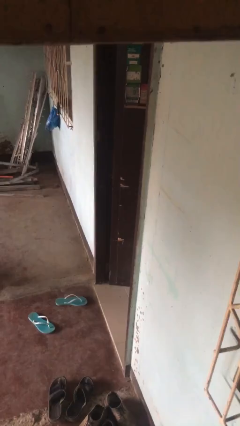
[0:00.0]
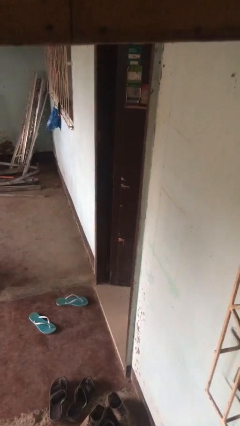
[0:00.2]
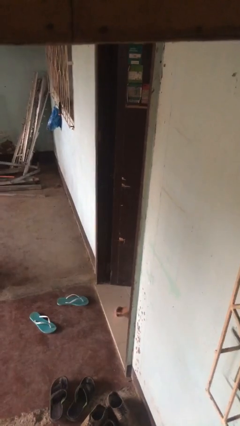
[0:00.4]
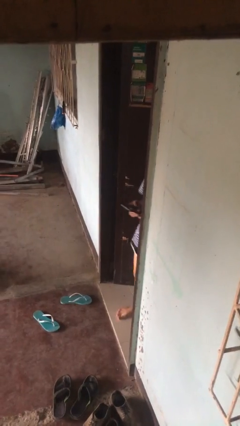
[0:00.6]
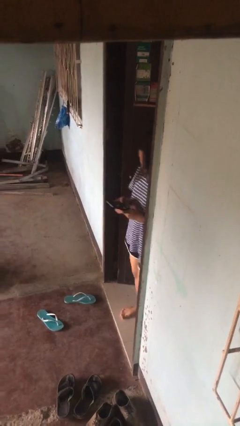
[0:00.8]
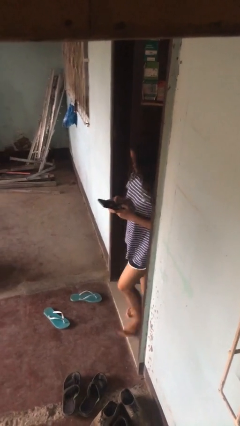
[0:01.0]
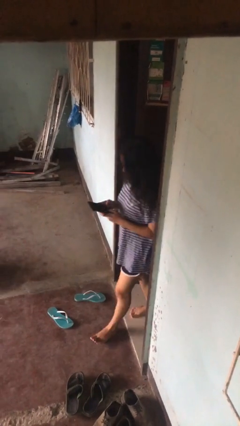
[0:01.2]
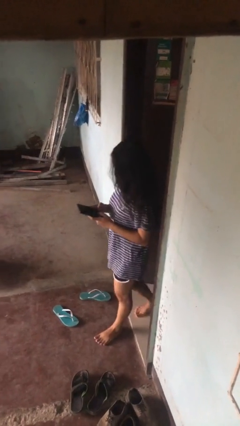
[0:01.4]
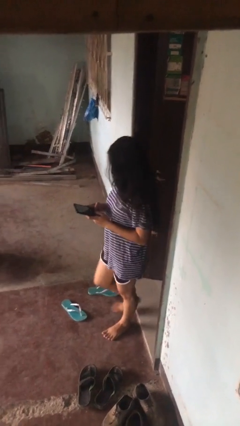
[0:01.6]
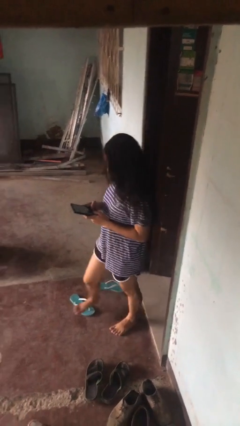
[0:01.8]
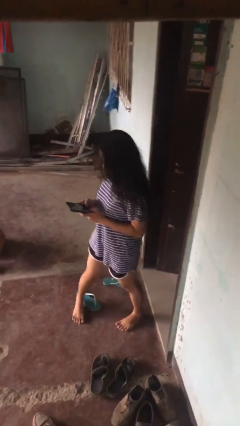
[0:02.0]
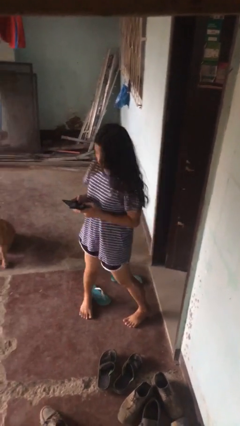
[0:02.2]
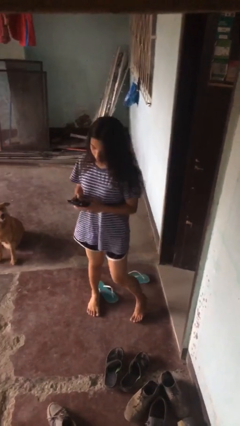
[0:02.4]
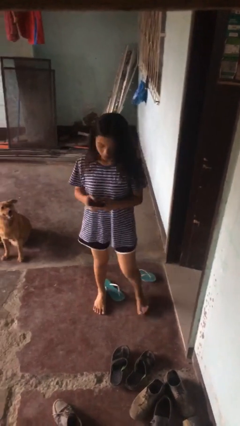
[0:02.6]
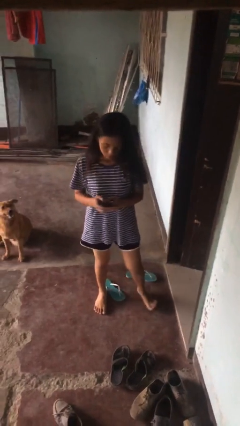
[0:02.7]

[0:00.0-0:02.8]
person exits scene through structure

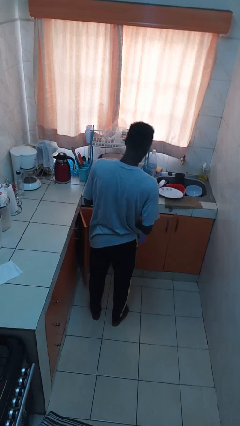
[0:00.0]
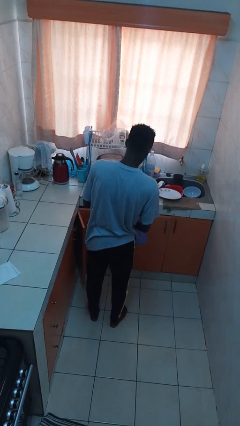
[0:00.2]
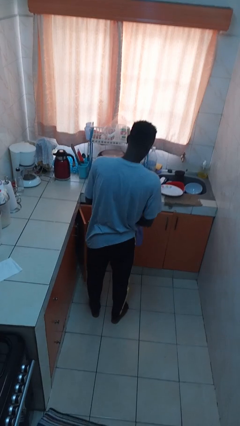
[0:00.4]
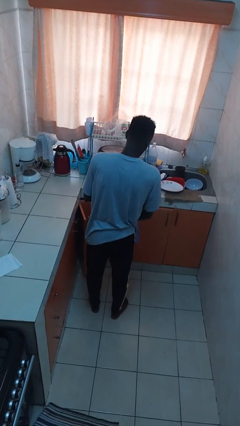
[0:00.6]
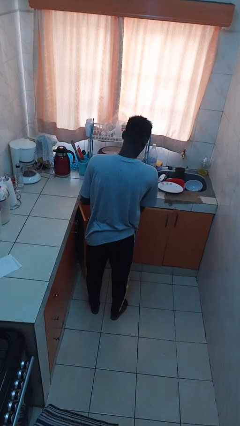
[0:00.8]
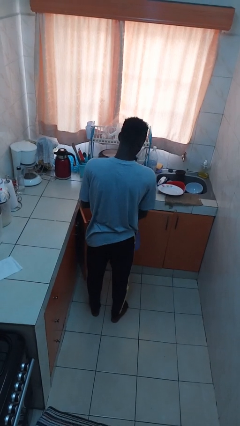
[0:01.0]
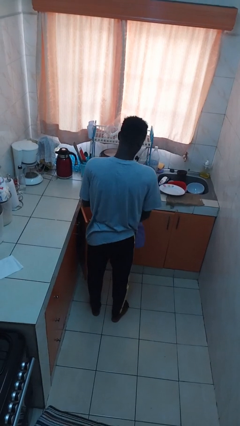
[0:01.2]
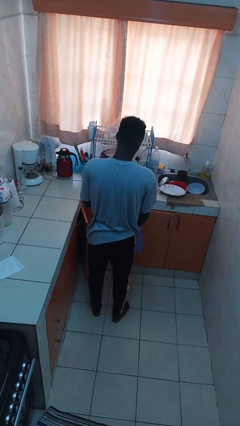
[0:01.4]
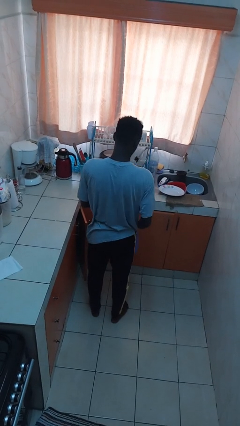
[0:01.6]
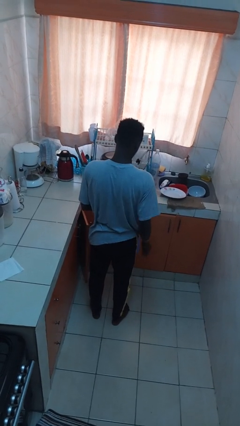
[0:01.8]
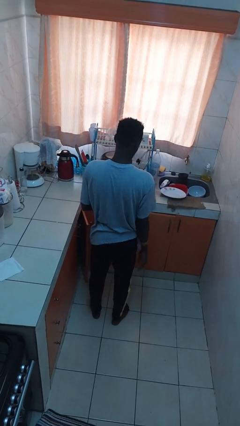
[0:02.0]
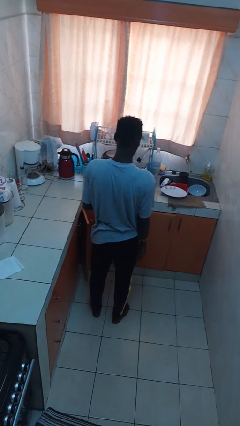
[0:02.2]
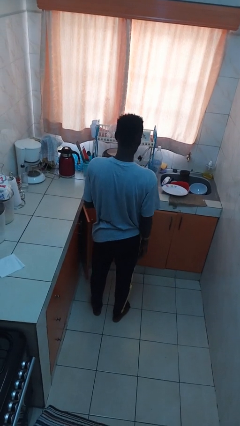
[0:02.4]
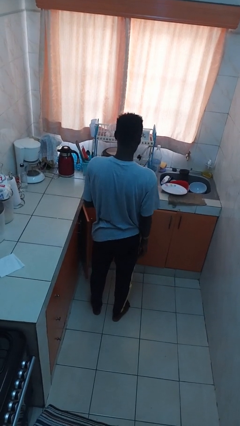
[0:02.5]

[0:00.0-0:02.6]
person puts object into bag

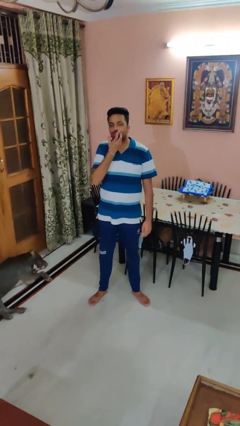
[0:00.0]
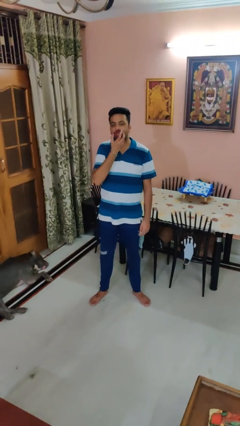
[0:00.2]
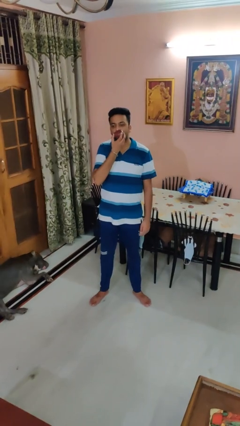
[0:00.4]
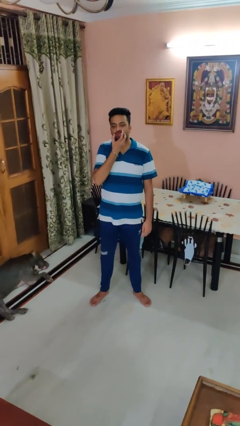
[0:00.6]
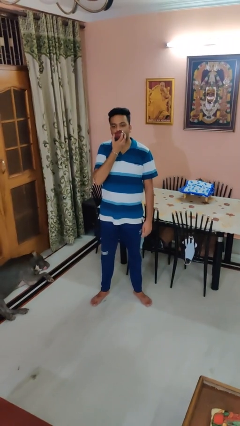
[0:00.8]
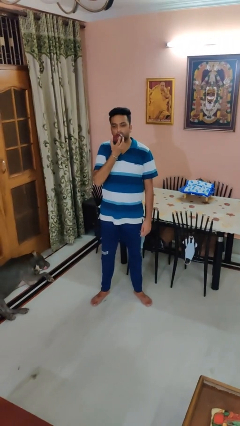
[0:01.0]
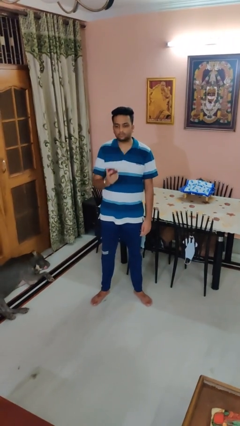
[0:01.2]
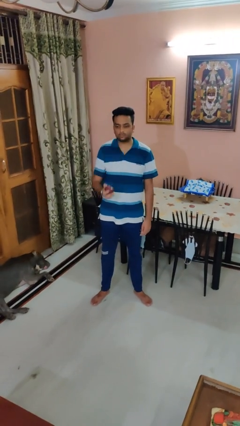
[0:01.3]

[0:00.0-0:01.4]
person eats apple

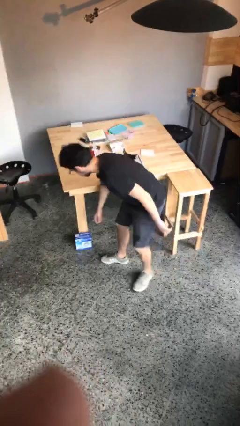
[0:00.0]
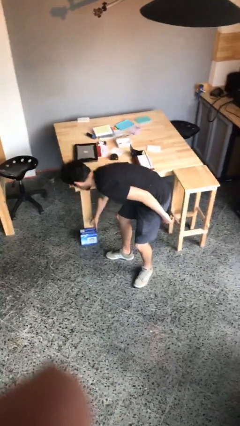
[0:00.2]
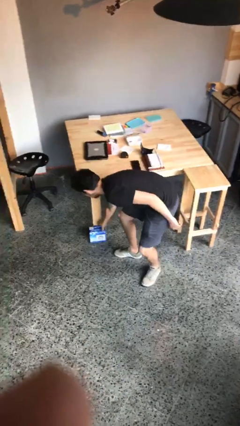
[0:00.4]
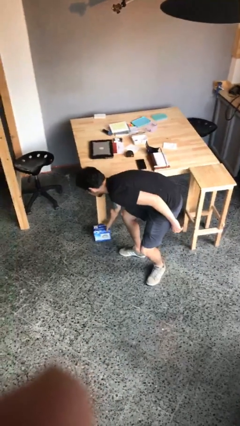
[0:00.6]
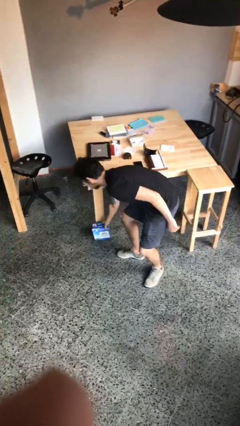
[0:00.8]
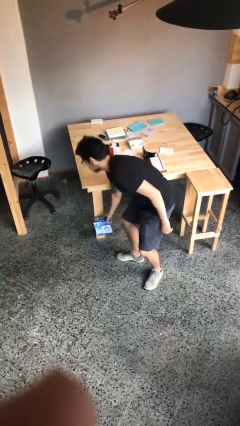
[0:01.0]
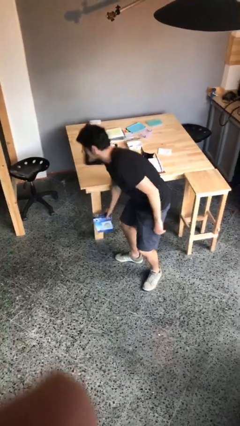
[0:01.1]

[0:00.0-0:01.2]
person picks up object from floor

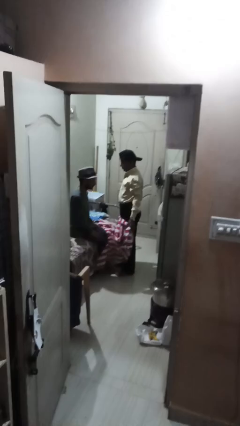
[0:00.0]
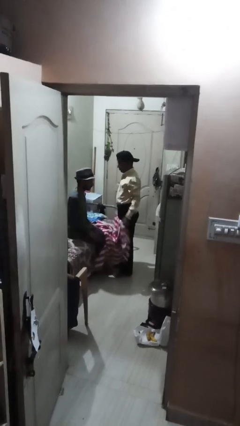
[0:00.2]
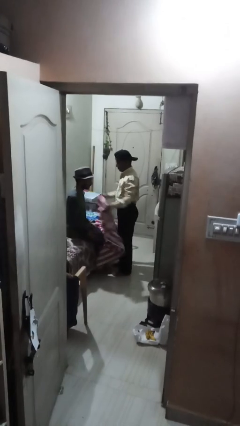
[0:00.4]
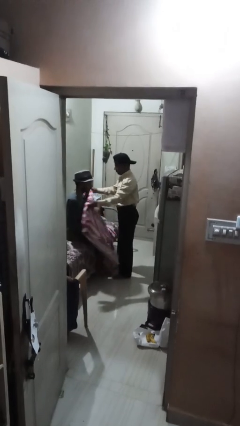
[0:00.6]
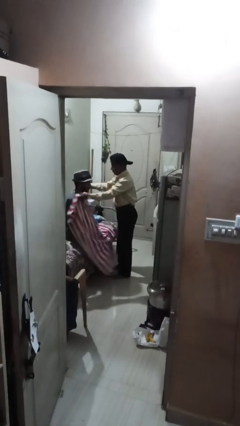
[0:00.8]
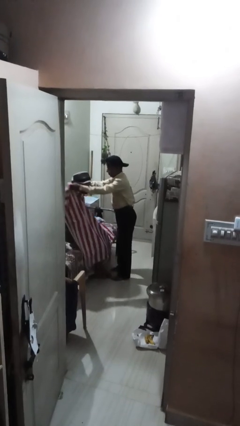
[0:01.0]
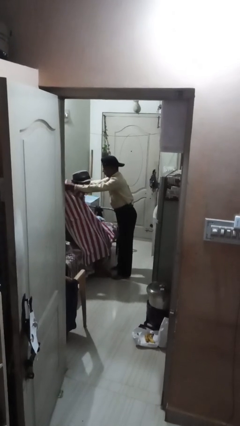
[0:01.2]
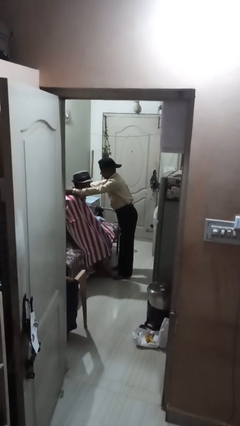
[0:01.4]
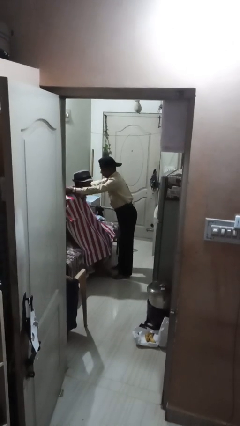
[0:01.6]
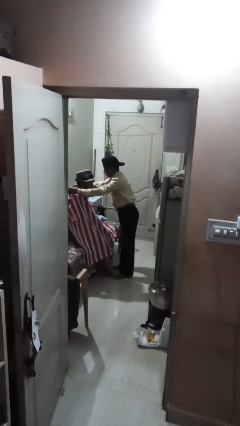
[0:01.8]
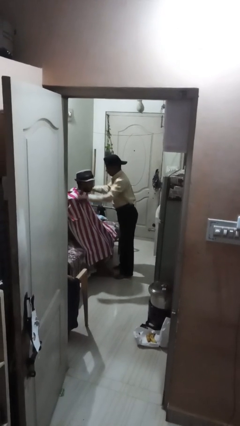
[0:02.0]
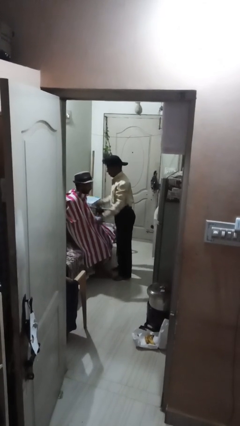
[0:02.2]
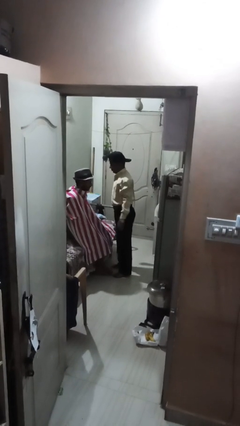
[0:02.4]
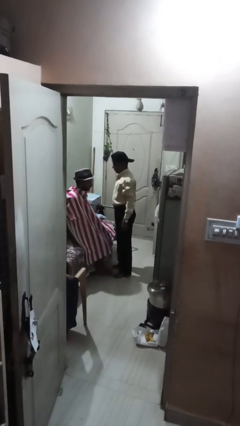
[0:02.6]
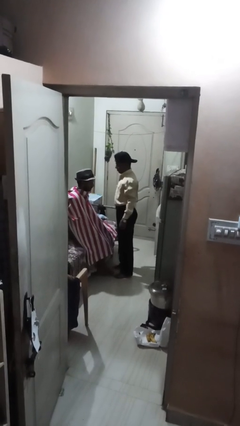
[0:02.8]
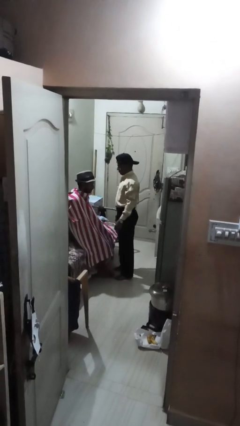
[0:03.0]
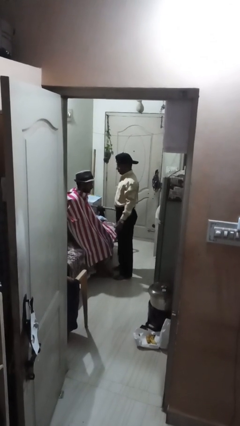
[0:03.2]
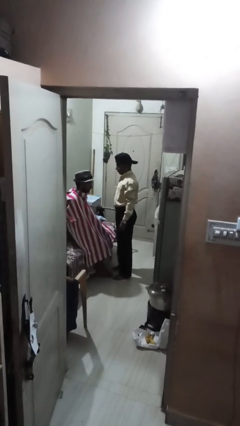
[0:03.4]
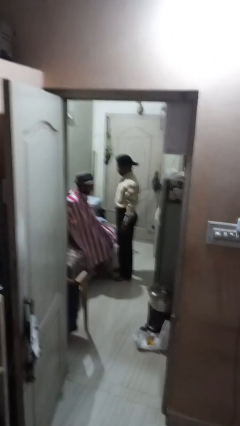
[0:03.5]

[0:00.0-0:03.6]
person covers friend with blanket

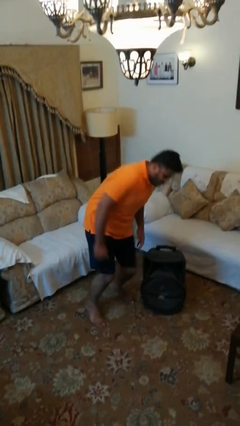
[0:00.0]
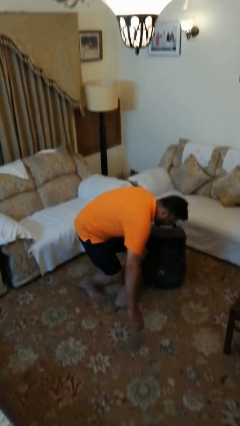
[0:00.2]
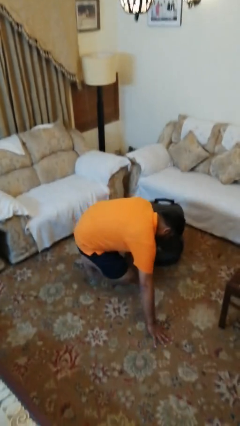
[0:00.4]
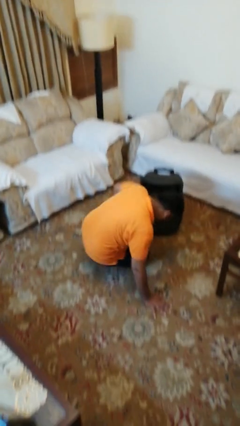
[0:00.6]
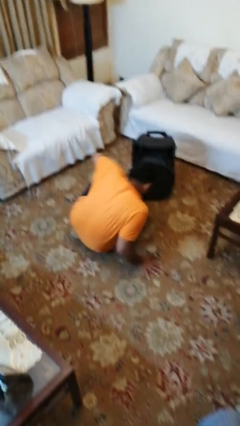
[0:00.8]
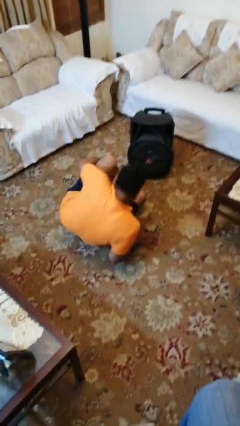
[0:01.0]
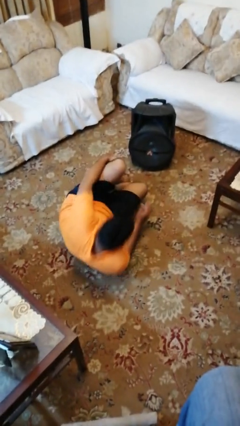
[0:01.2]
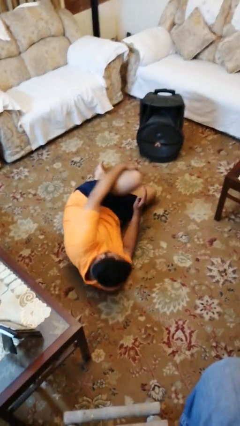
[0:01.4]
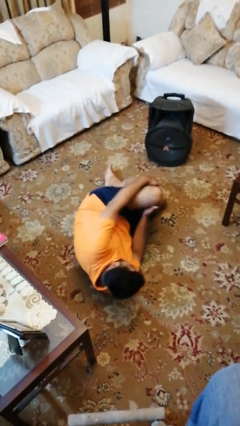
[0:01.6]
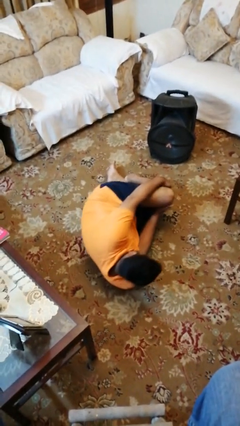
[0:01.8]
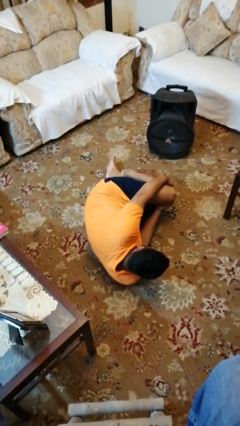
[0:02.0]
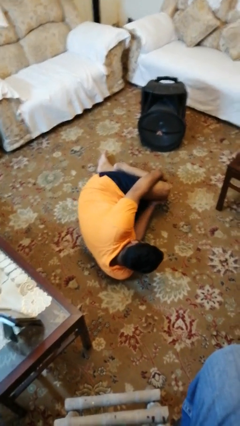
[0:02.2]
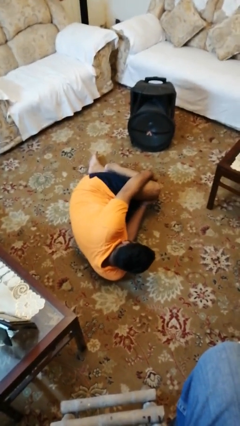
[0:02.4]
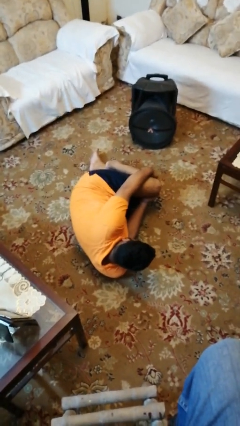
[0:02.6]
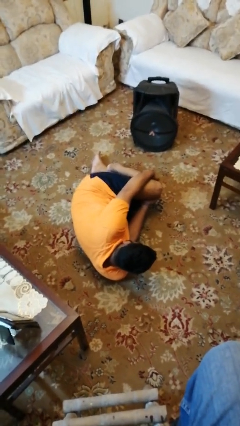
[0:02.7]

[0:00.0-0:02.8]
person lies down on floor

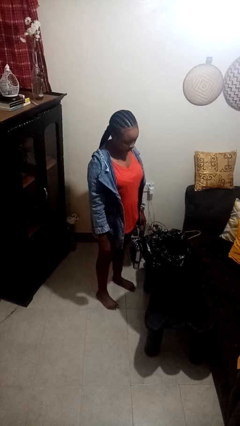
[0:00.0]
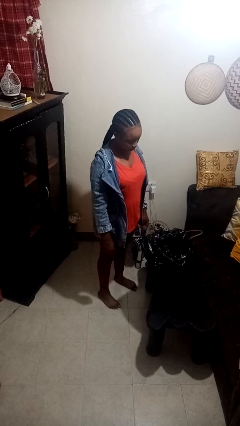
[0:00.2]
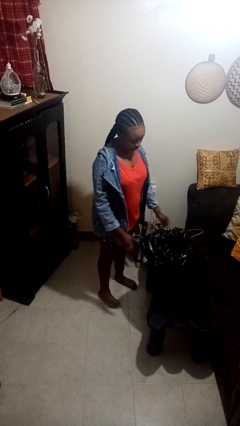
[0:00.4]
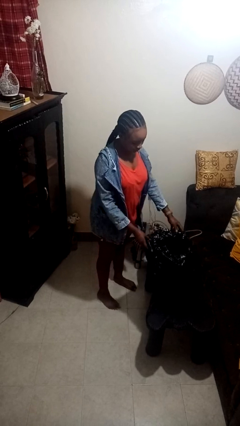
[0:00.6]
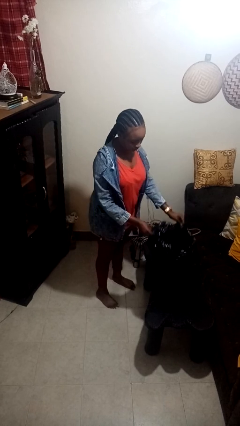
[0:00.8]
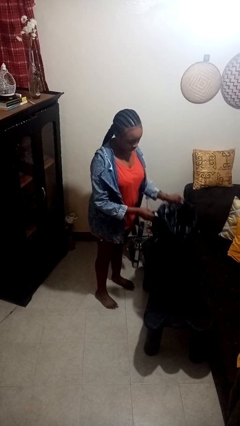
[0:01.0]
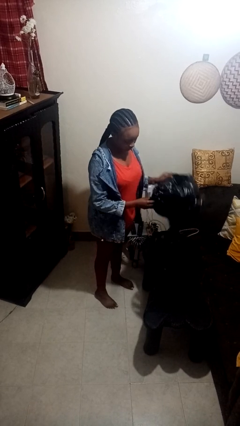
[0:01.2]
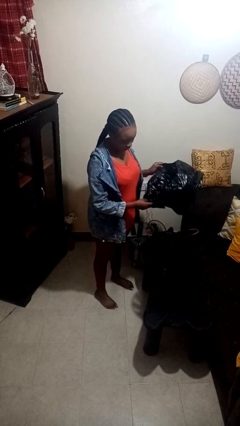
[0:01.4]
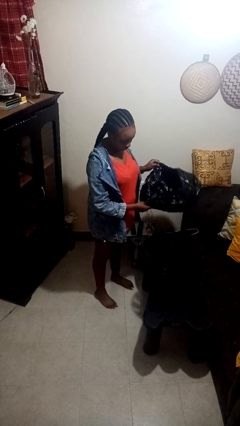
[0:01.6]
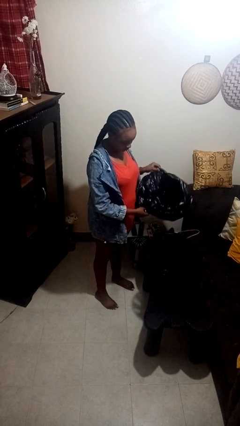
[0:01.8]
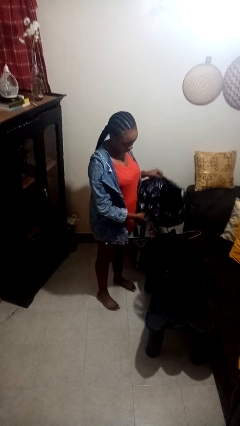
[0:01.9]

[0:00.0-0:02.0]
person removes trashbag from trashcan

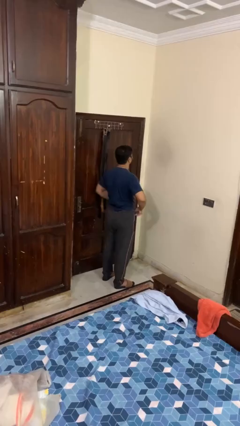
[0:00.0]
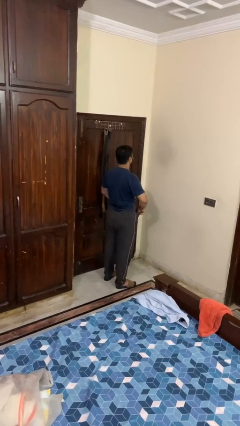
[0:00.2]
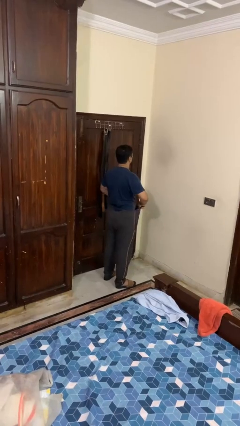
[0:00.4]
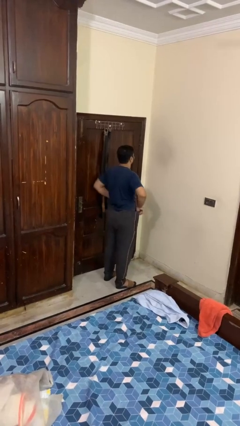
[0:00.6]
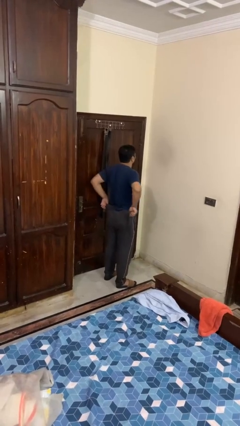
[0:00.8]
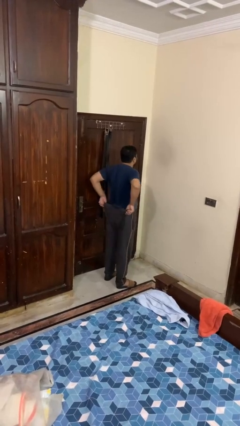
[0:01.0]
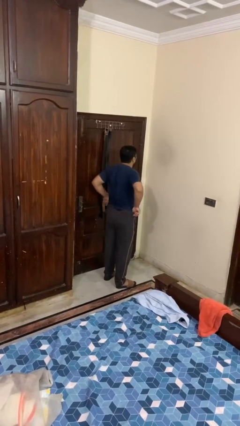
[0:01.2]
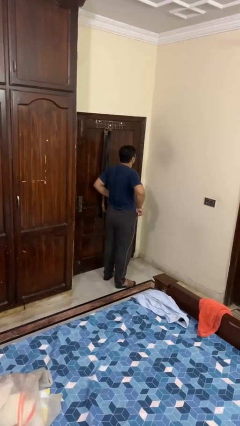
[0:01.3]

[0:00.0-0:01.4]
person hikes up pants
